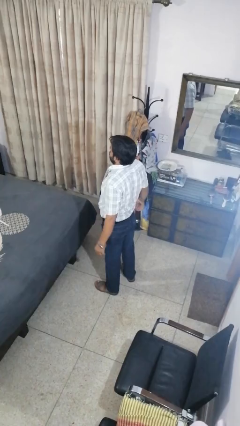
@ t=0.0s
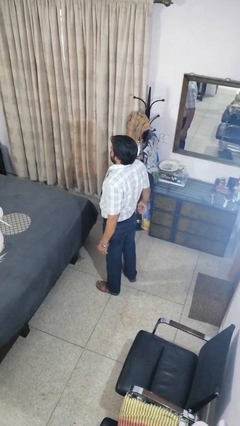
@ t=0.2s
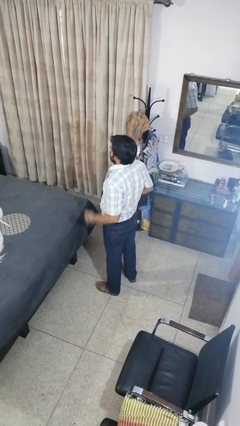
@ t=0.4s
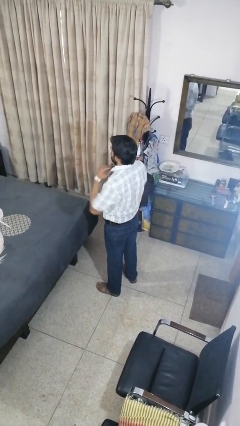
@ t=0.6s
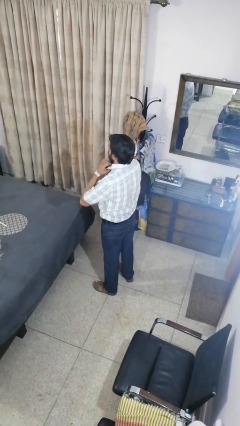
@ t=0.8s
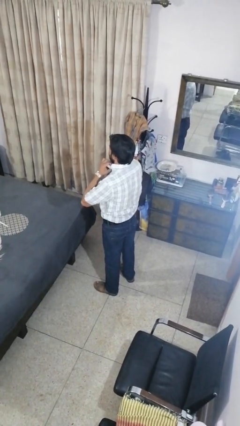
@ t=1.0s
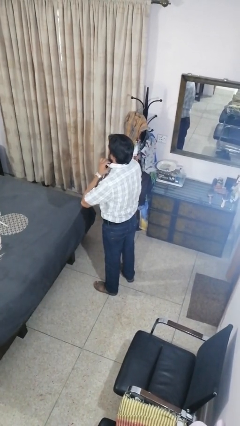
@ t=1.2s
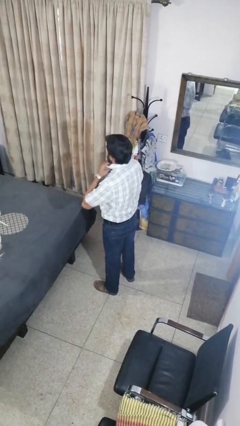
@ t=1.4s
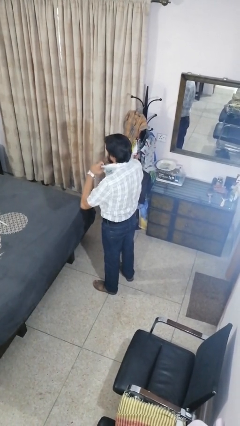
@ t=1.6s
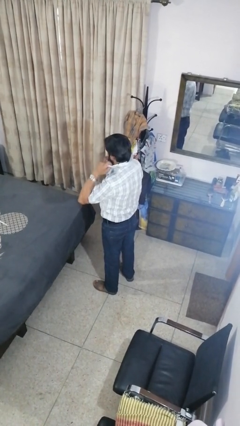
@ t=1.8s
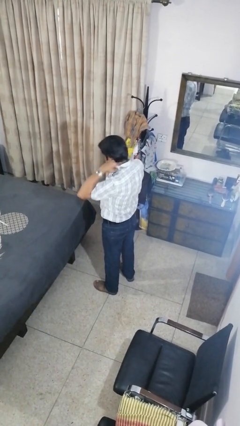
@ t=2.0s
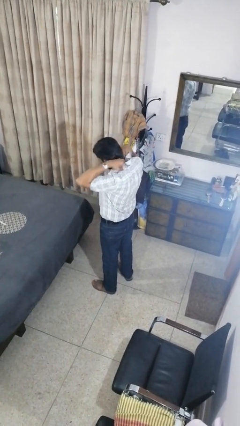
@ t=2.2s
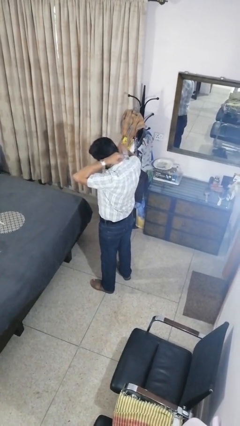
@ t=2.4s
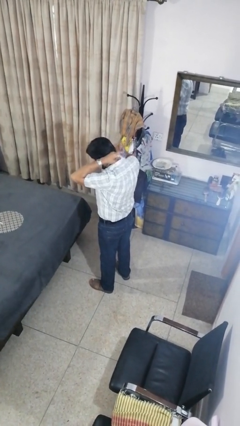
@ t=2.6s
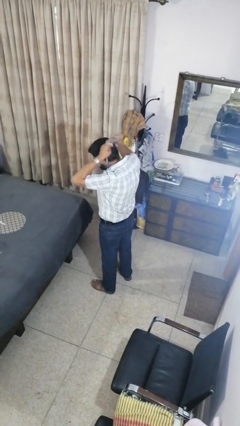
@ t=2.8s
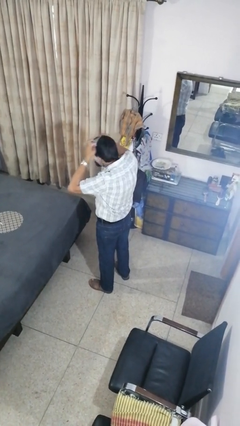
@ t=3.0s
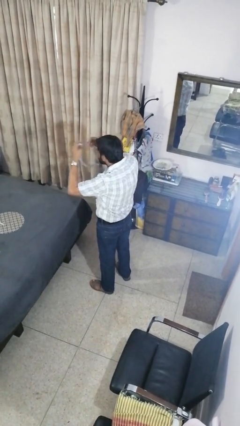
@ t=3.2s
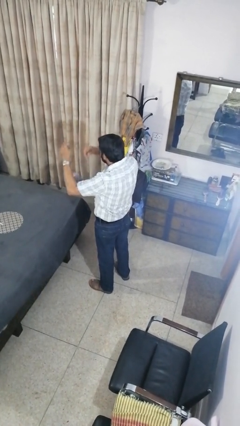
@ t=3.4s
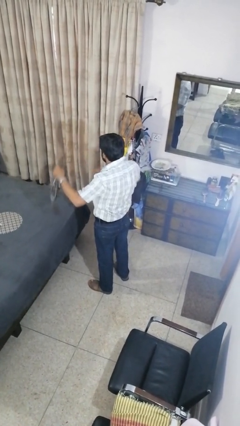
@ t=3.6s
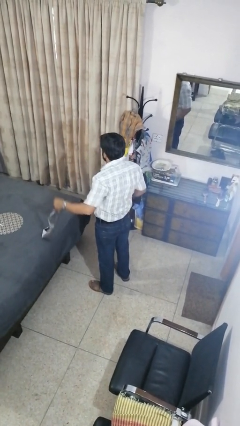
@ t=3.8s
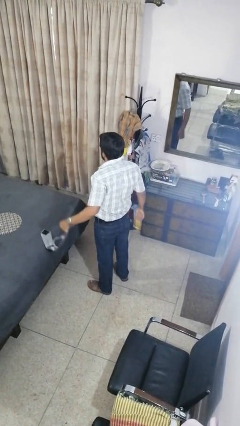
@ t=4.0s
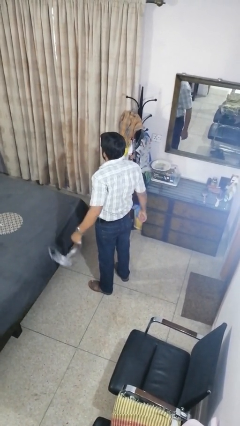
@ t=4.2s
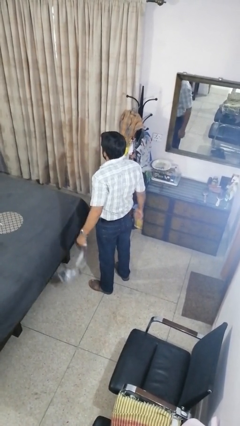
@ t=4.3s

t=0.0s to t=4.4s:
person takes off necktie

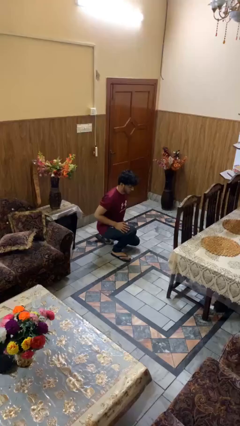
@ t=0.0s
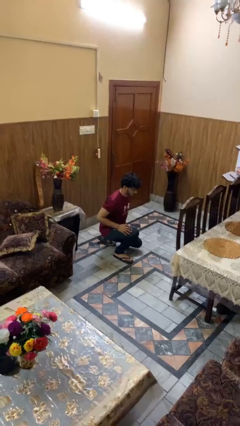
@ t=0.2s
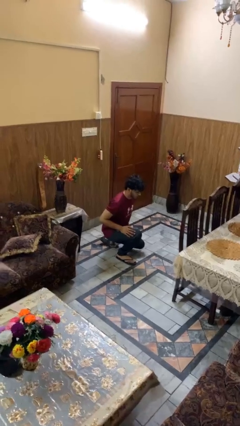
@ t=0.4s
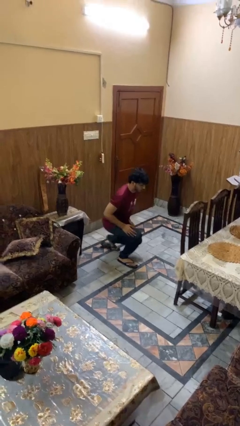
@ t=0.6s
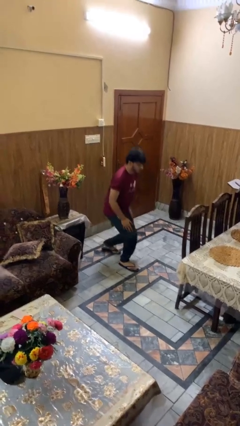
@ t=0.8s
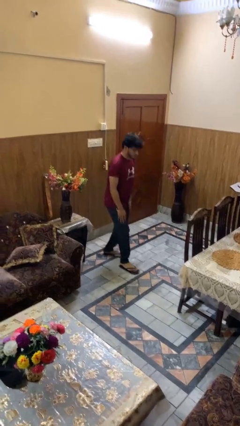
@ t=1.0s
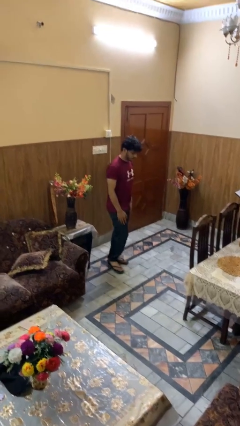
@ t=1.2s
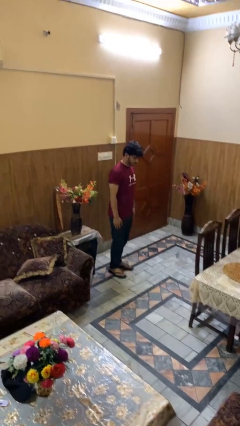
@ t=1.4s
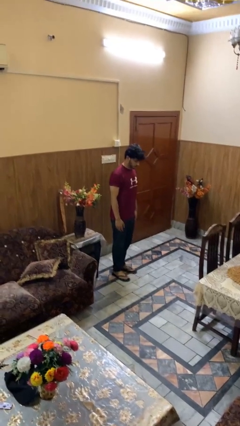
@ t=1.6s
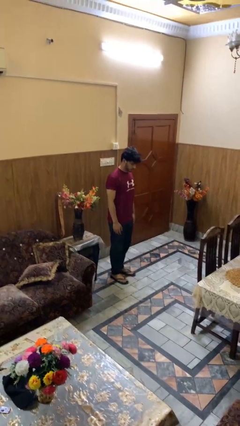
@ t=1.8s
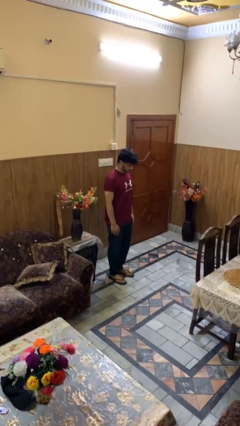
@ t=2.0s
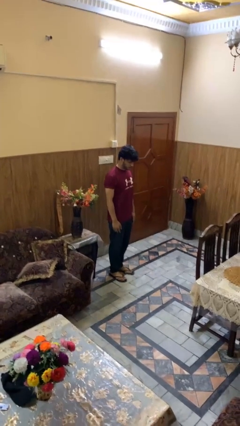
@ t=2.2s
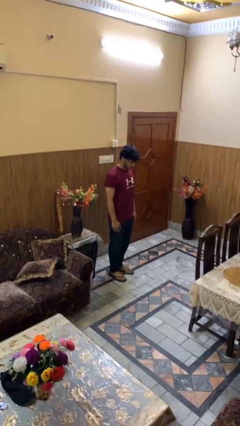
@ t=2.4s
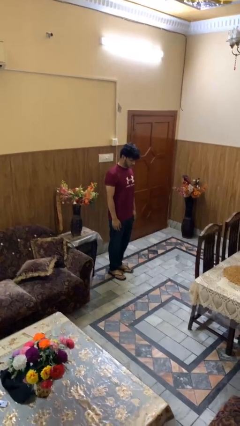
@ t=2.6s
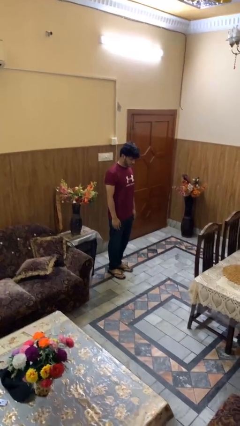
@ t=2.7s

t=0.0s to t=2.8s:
person stands up from floor

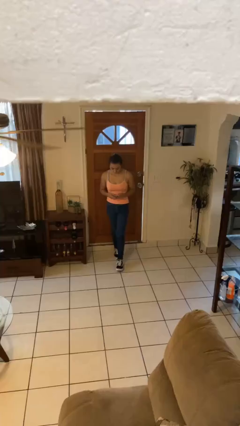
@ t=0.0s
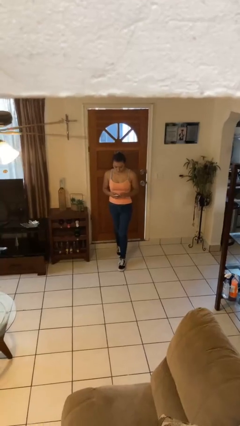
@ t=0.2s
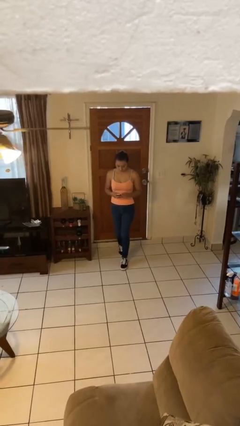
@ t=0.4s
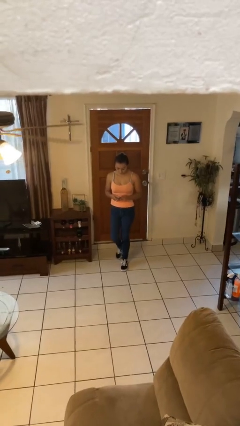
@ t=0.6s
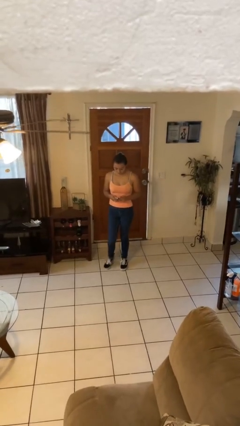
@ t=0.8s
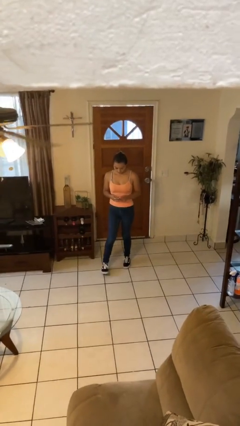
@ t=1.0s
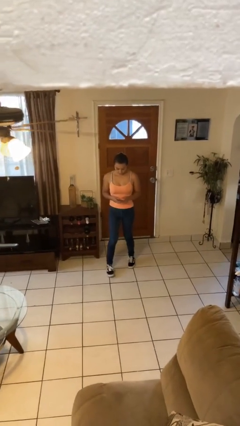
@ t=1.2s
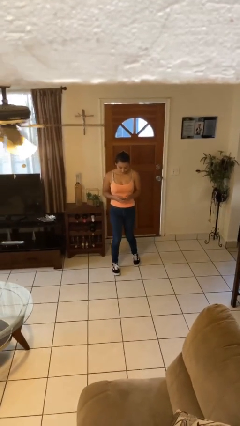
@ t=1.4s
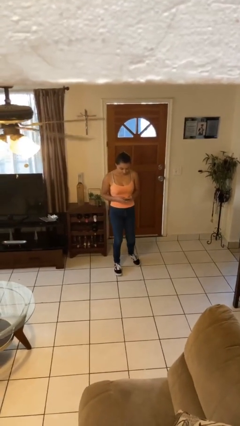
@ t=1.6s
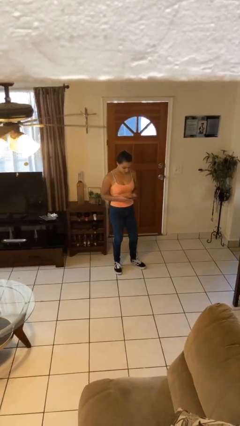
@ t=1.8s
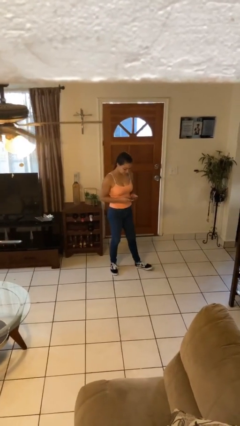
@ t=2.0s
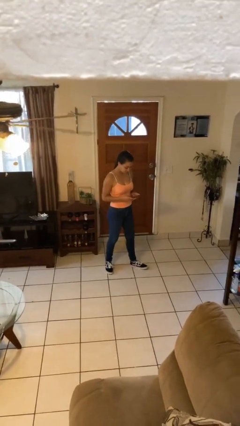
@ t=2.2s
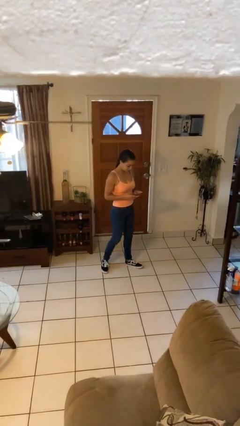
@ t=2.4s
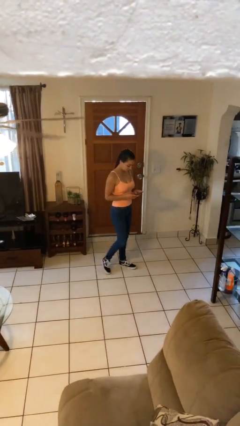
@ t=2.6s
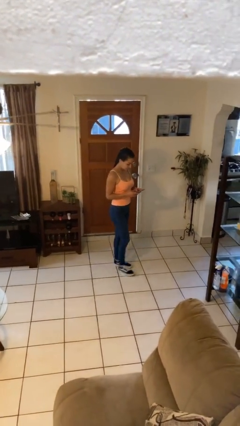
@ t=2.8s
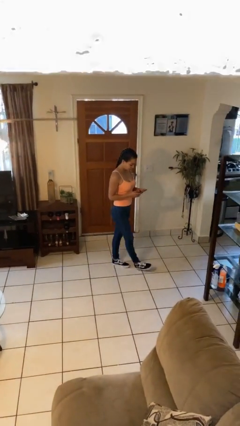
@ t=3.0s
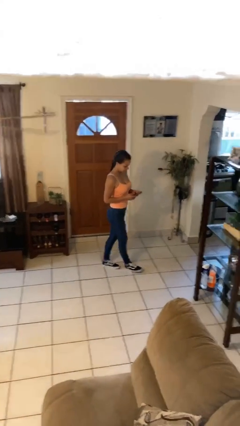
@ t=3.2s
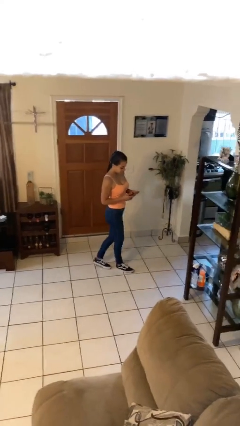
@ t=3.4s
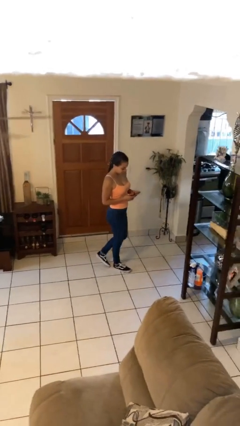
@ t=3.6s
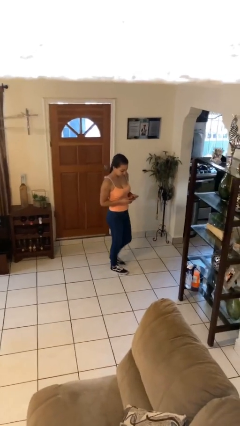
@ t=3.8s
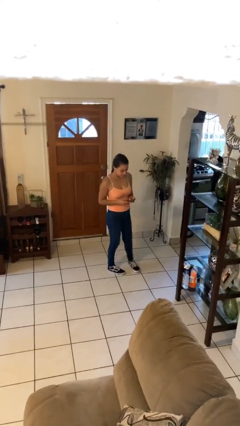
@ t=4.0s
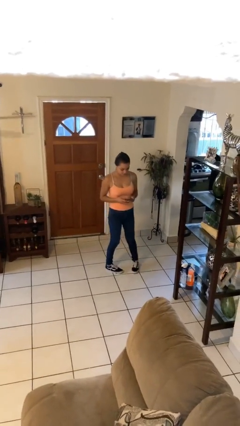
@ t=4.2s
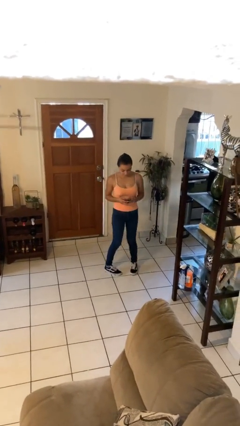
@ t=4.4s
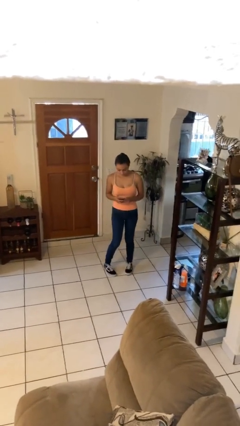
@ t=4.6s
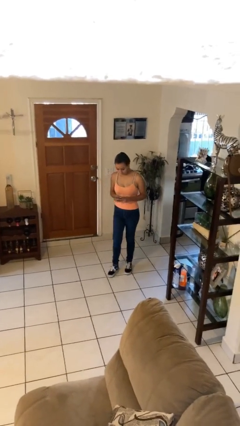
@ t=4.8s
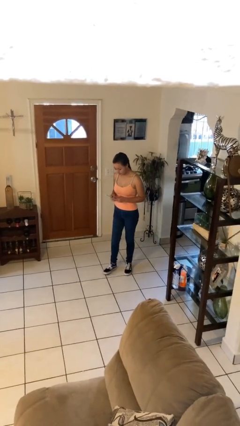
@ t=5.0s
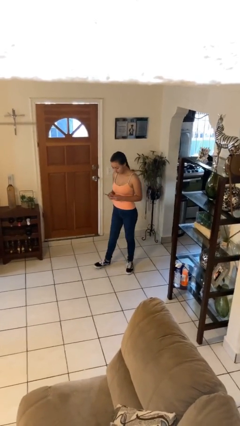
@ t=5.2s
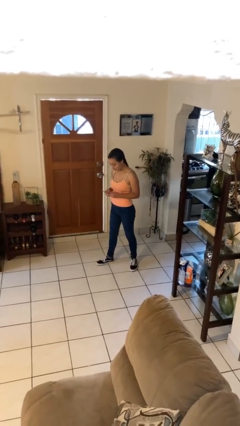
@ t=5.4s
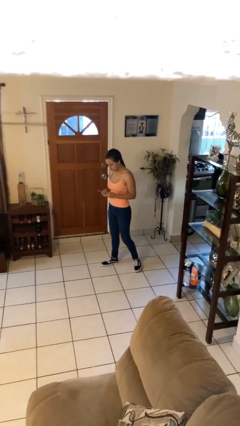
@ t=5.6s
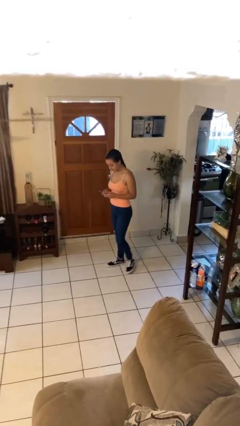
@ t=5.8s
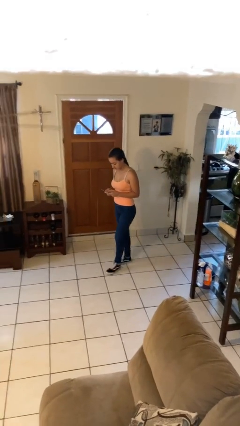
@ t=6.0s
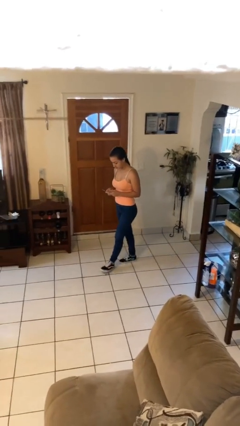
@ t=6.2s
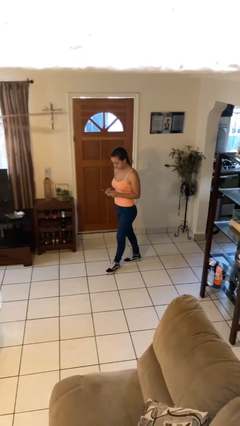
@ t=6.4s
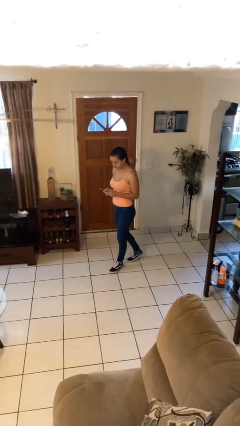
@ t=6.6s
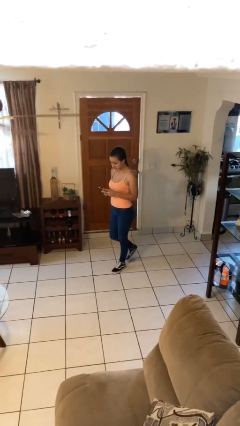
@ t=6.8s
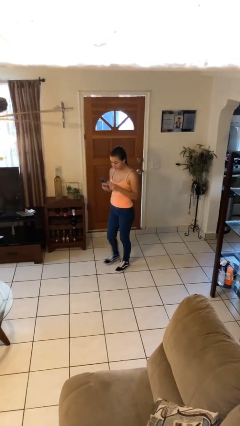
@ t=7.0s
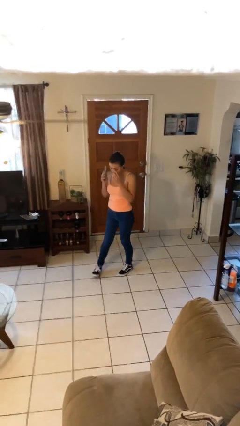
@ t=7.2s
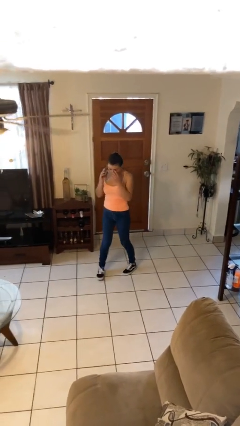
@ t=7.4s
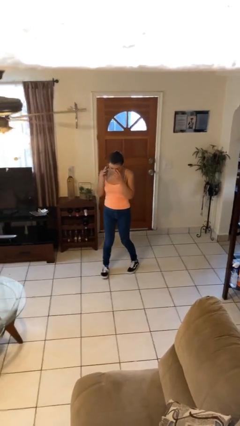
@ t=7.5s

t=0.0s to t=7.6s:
person texts on phone

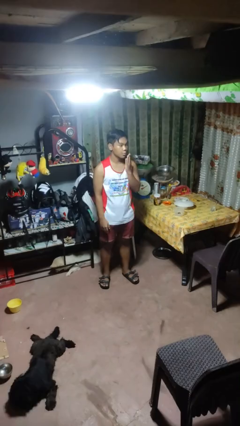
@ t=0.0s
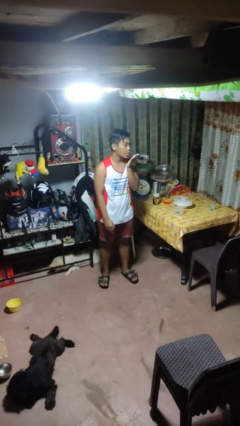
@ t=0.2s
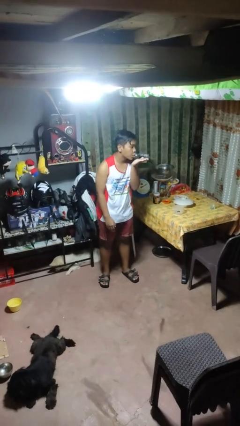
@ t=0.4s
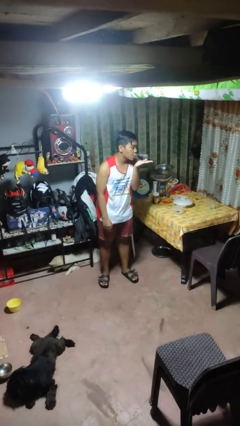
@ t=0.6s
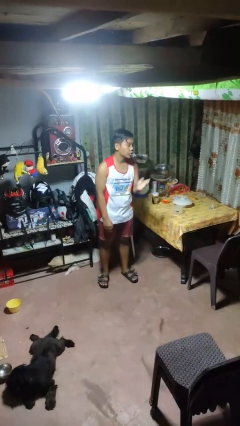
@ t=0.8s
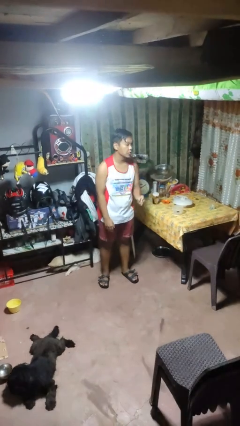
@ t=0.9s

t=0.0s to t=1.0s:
person gestures blow kiss

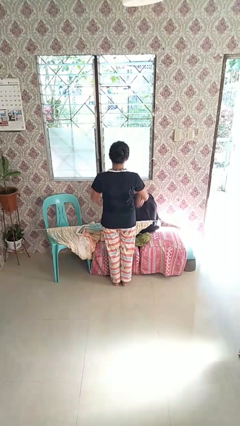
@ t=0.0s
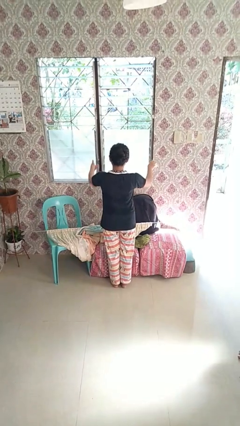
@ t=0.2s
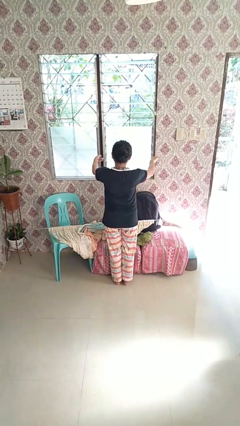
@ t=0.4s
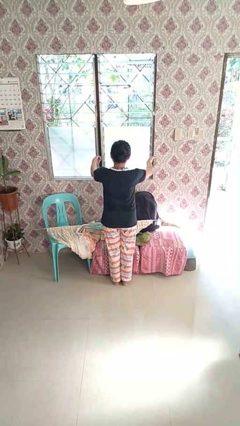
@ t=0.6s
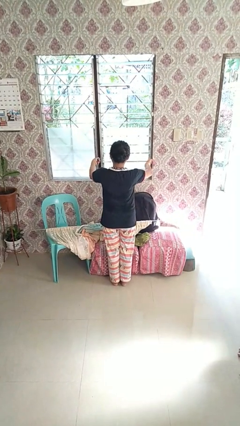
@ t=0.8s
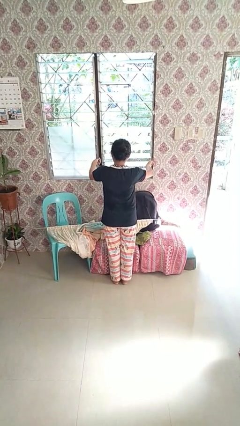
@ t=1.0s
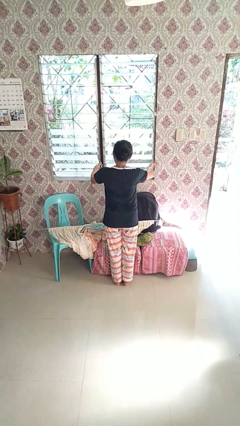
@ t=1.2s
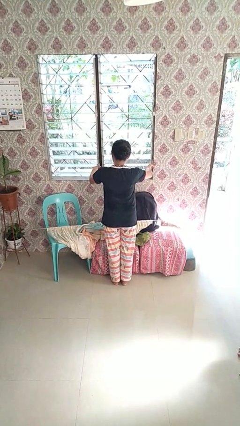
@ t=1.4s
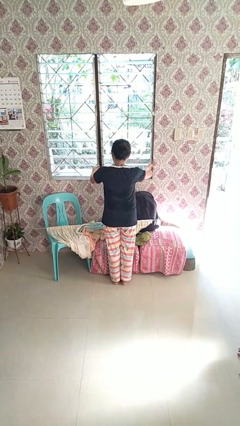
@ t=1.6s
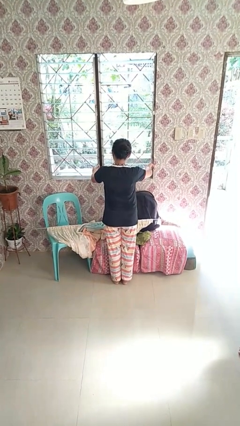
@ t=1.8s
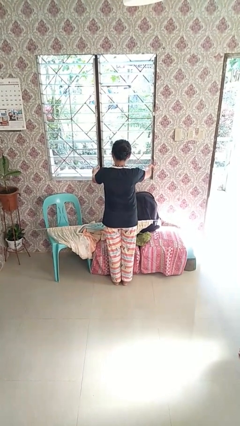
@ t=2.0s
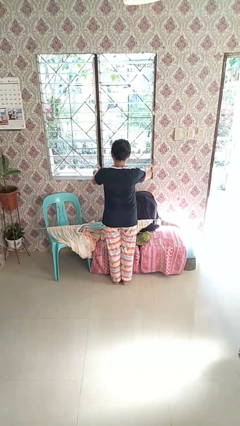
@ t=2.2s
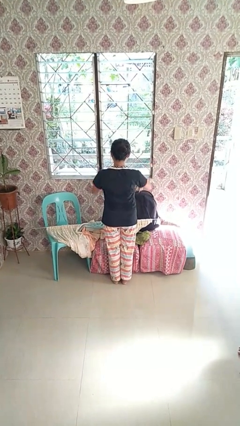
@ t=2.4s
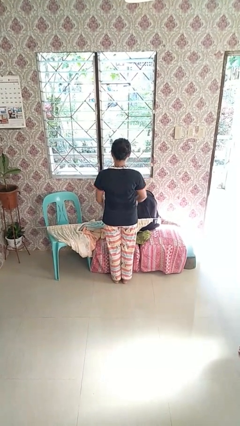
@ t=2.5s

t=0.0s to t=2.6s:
person opens home window
